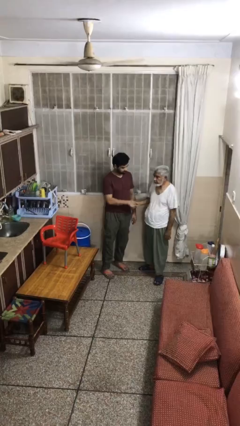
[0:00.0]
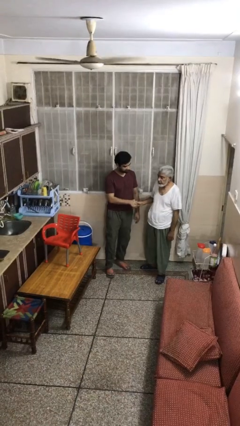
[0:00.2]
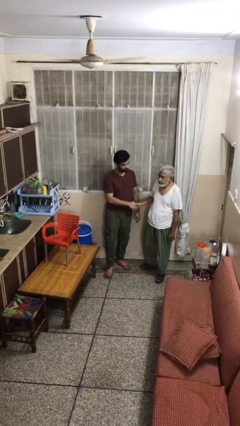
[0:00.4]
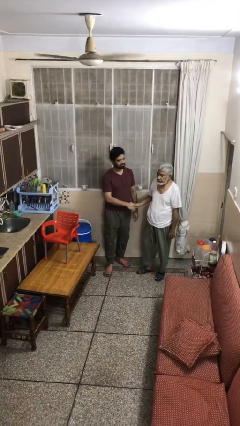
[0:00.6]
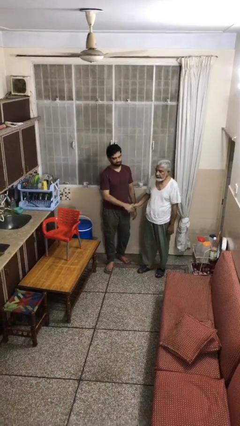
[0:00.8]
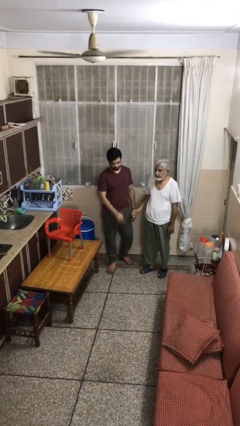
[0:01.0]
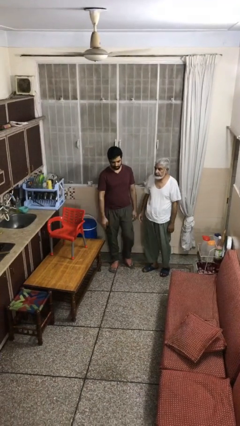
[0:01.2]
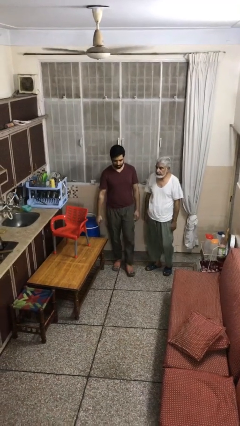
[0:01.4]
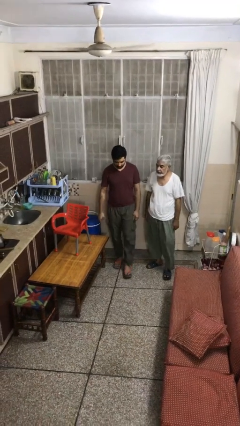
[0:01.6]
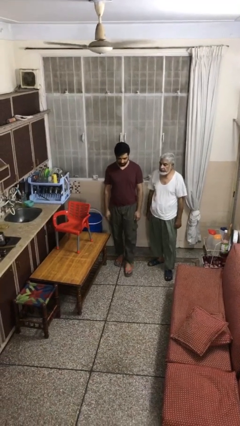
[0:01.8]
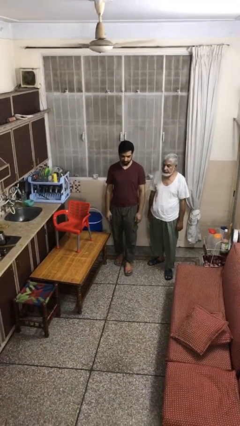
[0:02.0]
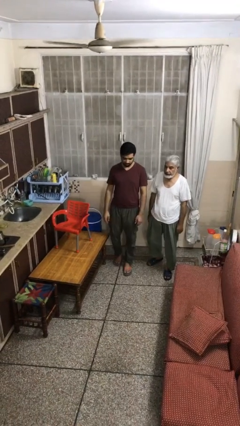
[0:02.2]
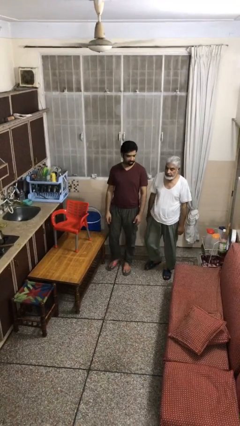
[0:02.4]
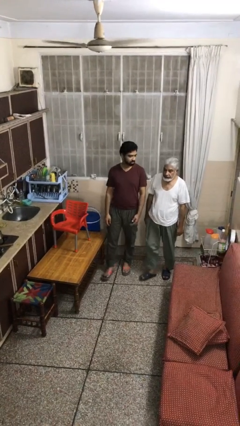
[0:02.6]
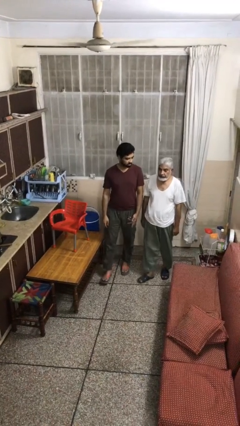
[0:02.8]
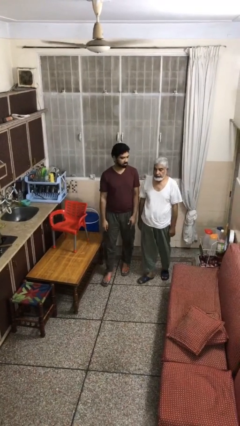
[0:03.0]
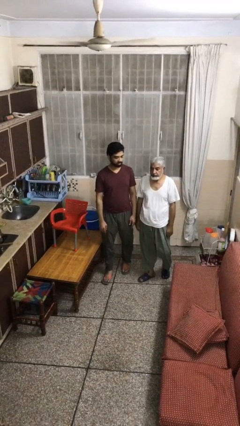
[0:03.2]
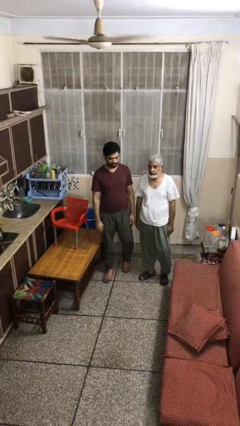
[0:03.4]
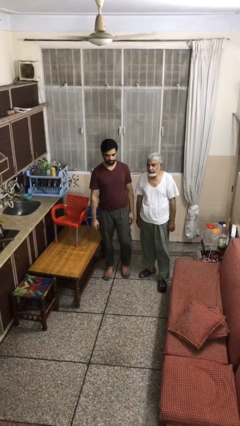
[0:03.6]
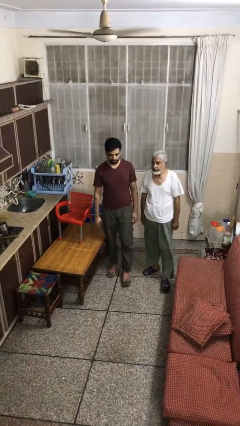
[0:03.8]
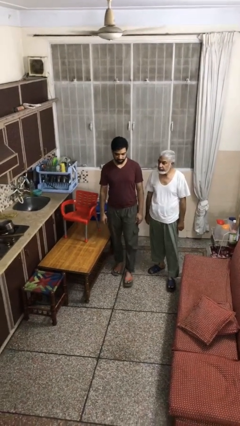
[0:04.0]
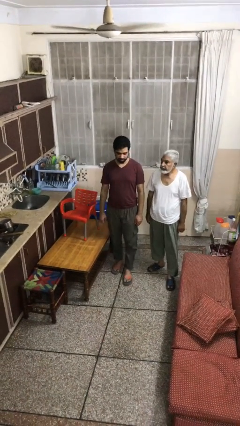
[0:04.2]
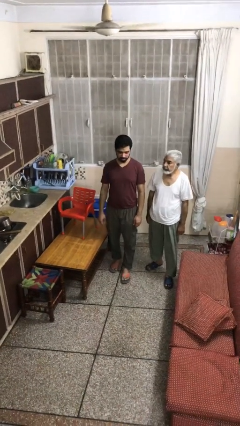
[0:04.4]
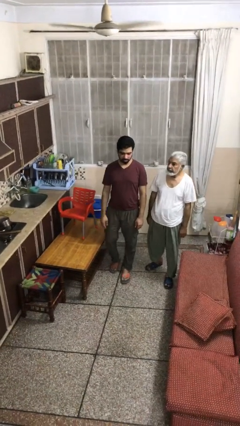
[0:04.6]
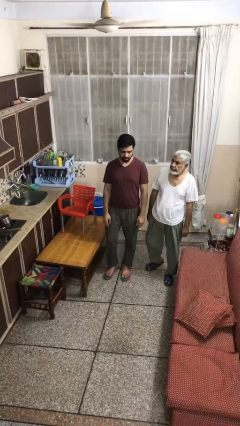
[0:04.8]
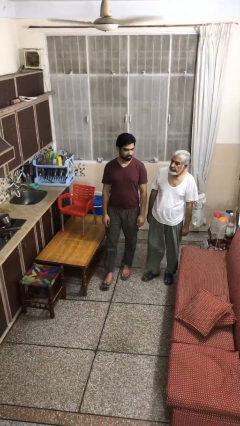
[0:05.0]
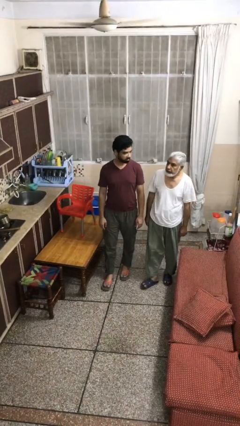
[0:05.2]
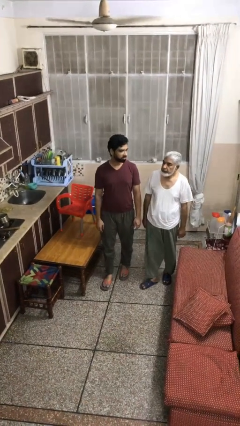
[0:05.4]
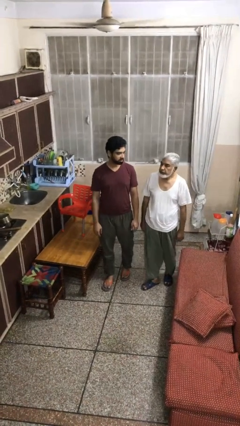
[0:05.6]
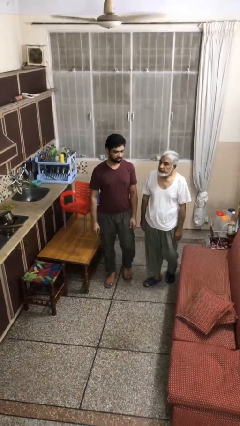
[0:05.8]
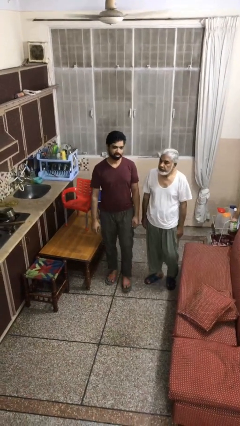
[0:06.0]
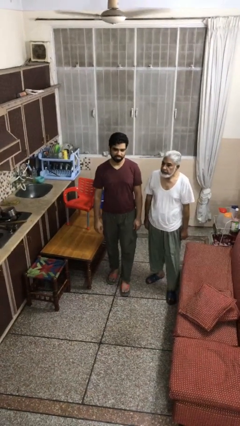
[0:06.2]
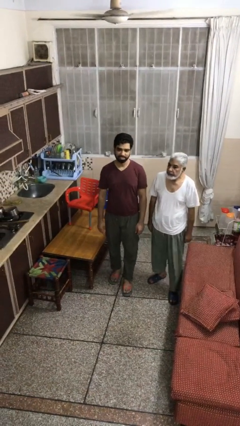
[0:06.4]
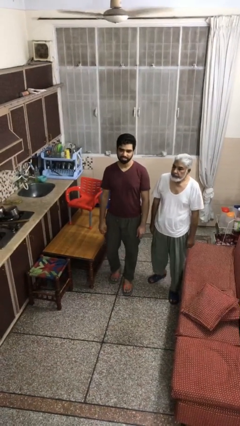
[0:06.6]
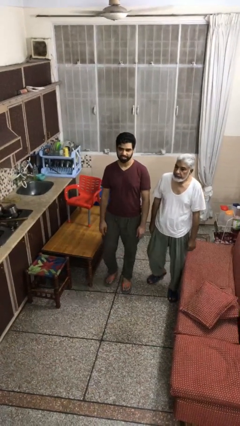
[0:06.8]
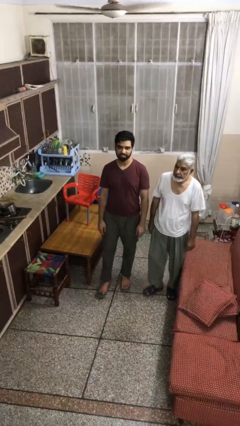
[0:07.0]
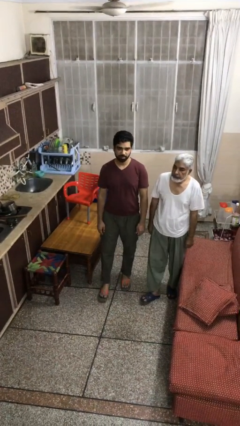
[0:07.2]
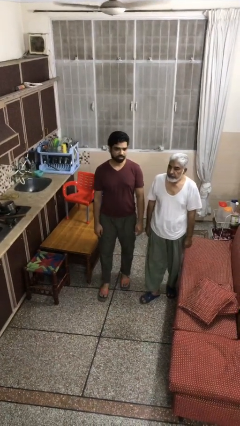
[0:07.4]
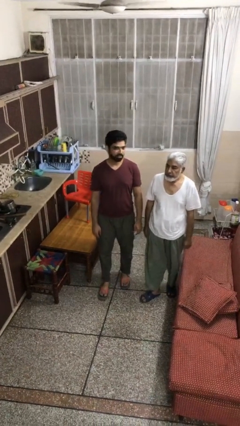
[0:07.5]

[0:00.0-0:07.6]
person talks to person

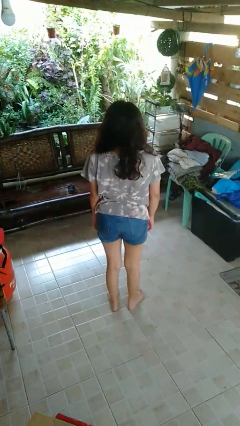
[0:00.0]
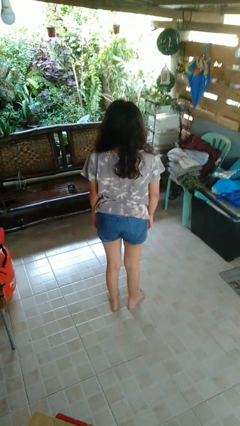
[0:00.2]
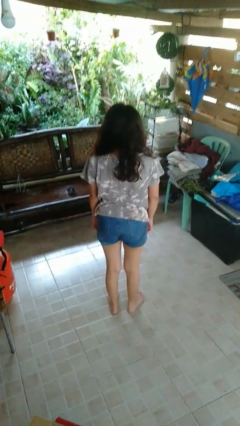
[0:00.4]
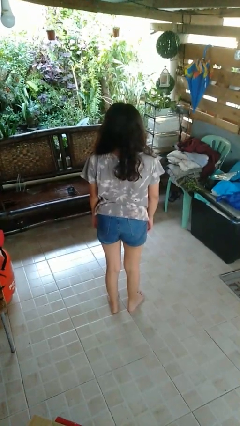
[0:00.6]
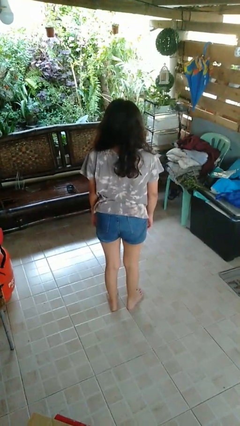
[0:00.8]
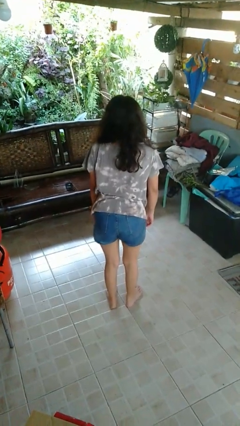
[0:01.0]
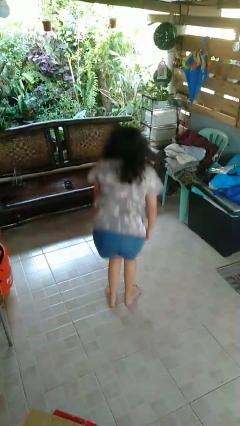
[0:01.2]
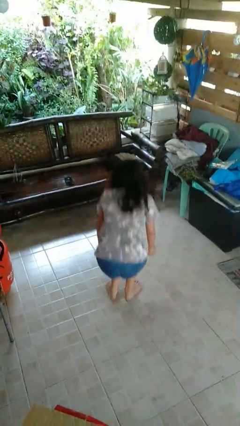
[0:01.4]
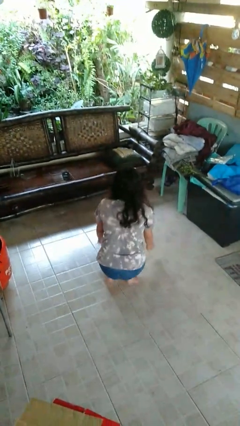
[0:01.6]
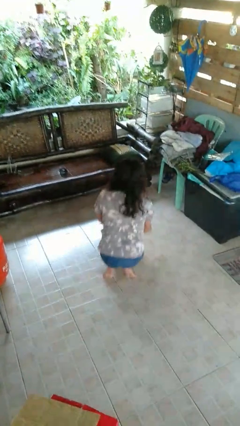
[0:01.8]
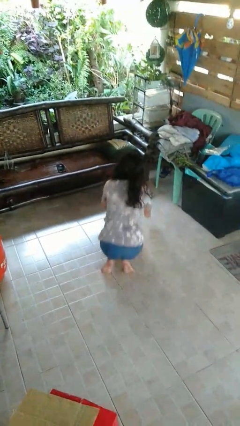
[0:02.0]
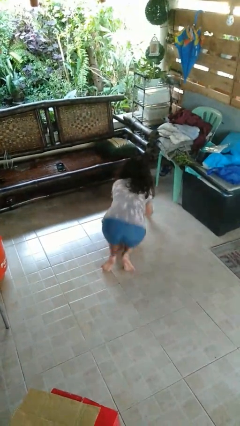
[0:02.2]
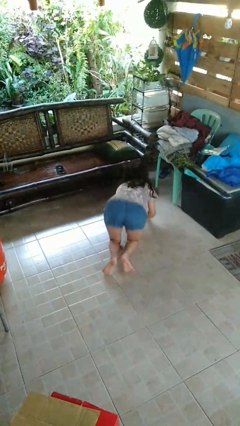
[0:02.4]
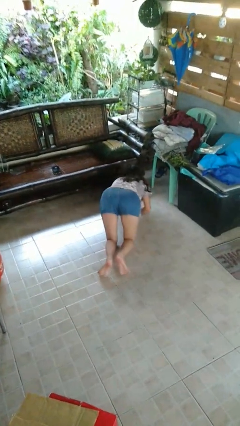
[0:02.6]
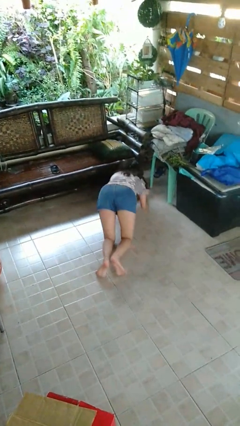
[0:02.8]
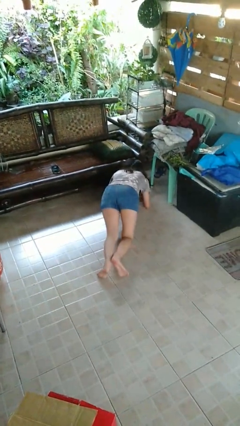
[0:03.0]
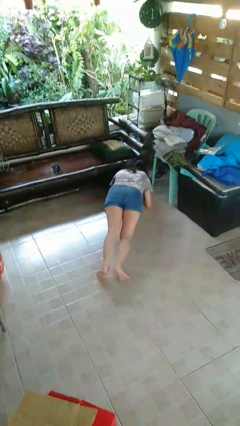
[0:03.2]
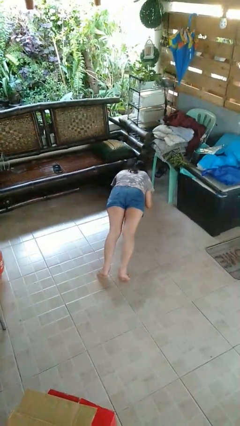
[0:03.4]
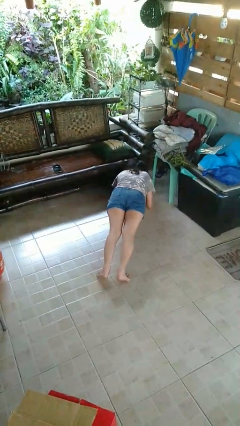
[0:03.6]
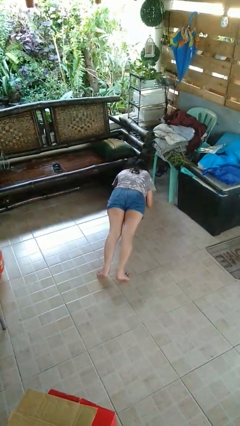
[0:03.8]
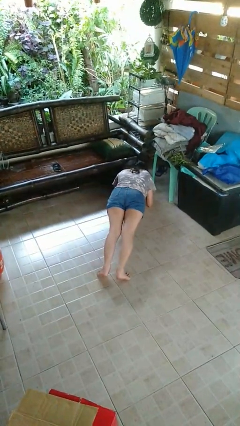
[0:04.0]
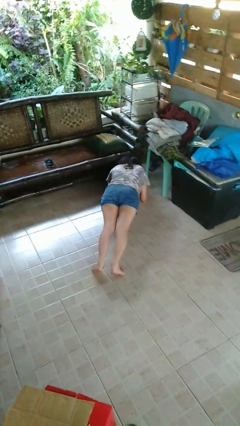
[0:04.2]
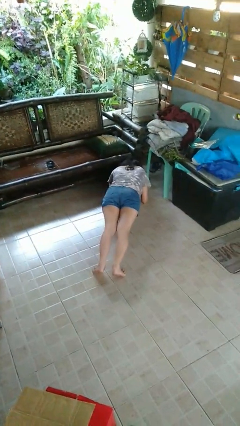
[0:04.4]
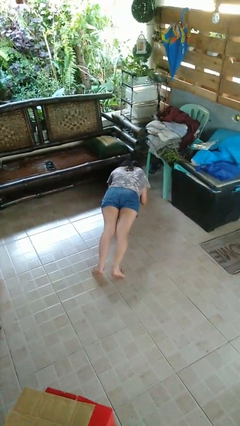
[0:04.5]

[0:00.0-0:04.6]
person exercises with plank

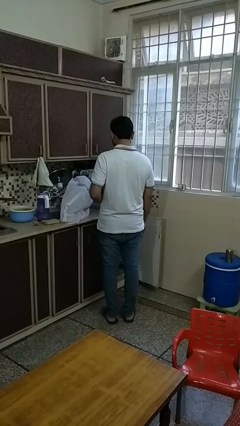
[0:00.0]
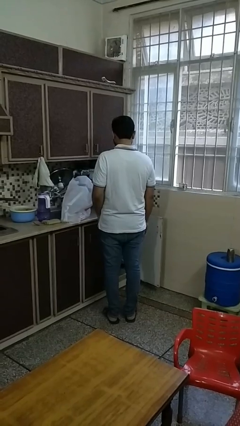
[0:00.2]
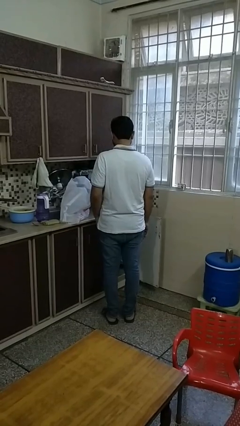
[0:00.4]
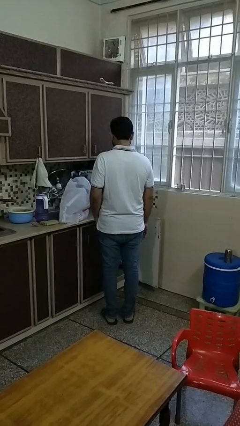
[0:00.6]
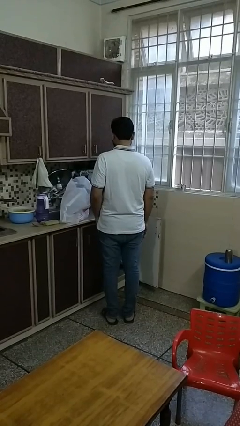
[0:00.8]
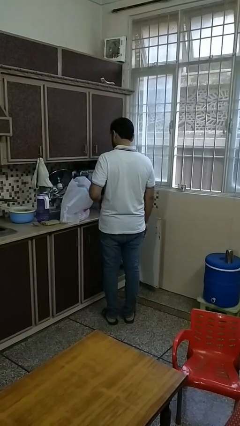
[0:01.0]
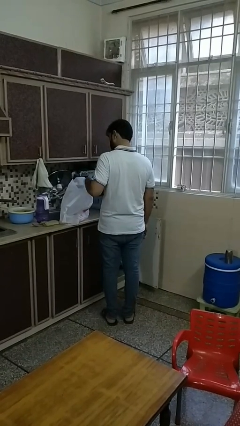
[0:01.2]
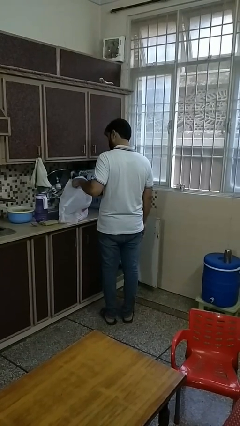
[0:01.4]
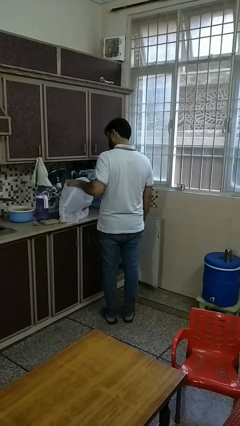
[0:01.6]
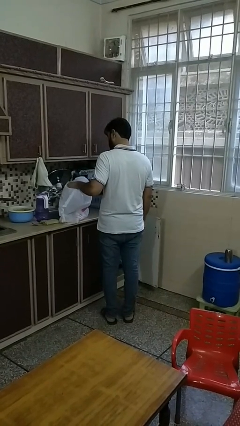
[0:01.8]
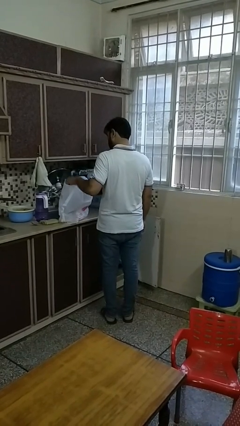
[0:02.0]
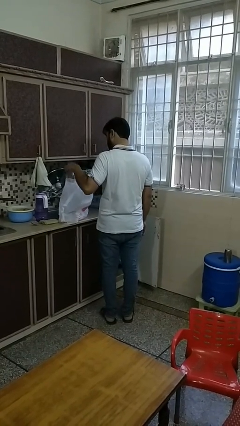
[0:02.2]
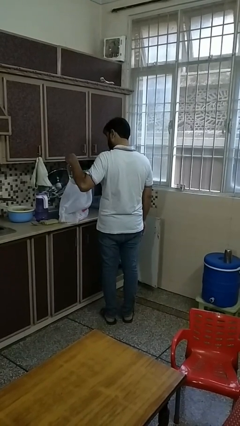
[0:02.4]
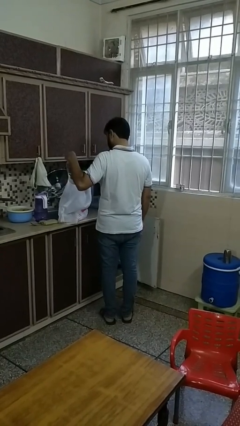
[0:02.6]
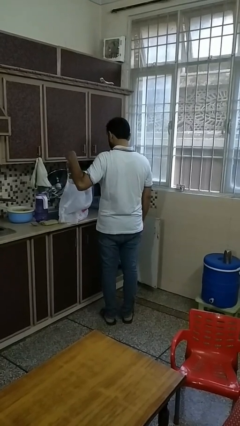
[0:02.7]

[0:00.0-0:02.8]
person takes object from bag

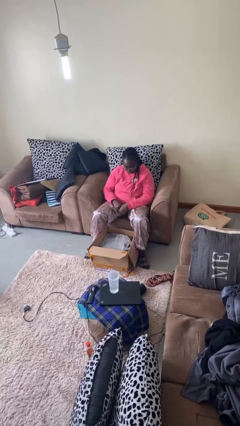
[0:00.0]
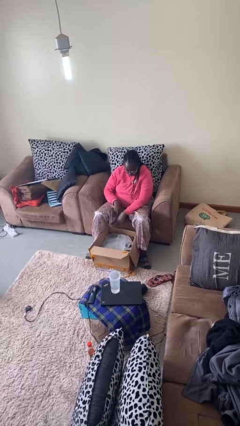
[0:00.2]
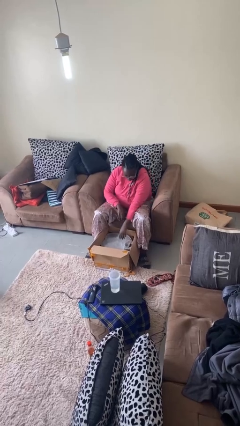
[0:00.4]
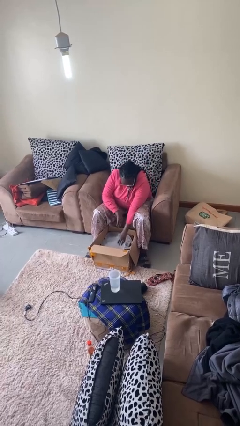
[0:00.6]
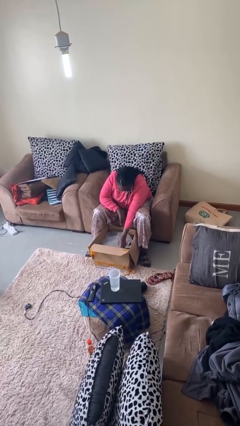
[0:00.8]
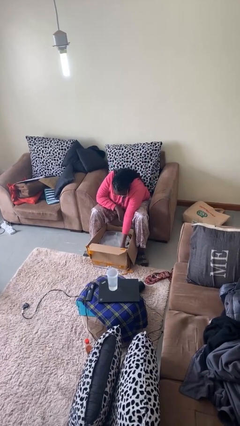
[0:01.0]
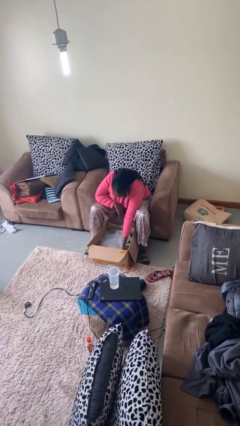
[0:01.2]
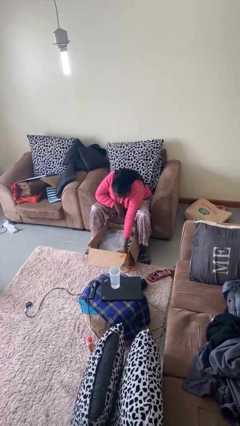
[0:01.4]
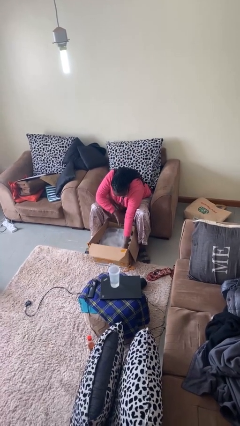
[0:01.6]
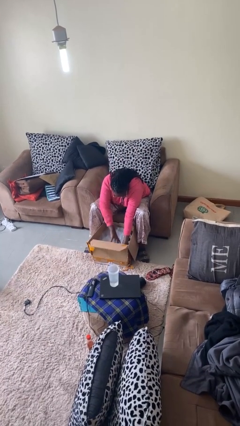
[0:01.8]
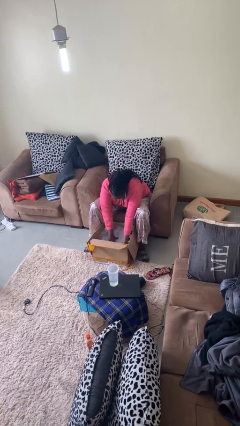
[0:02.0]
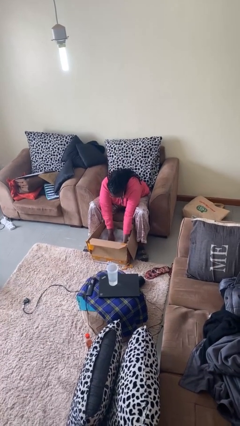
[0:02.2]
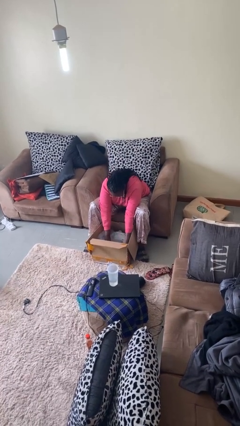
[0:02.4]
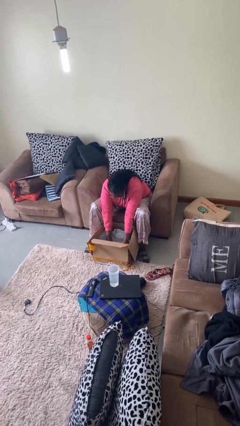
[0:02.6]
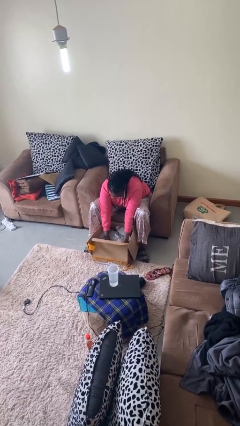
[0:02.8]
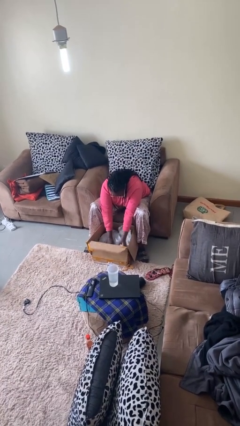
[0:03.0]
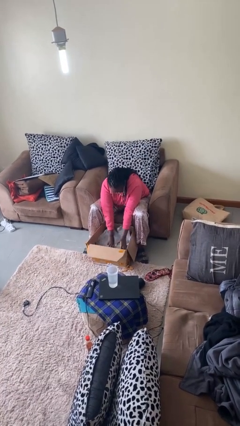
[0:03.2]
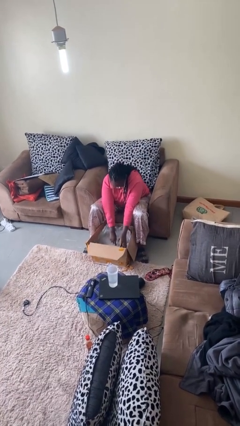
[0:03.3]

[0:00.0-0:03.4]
person searches in box
